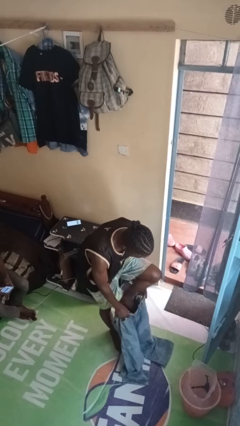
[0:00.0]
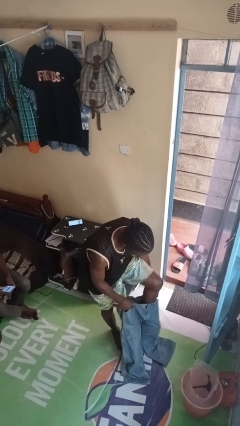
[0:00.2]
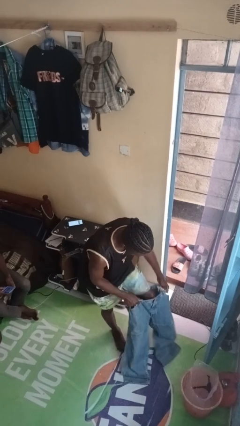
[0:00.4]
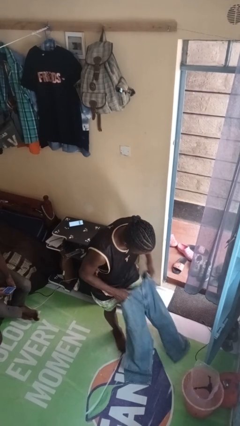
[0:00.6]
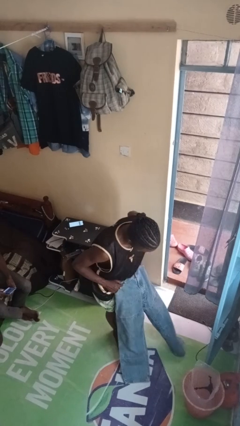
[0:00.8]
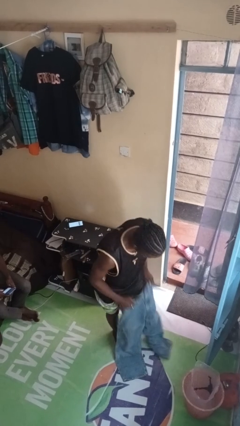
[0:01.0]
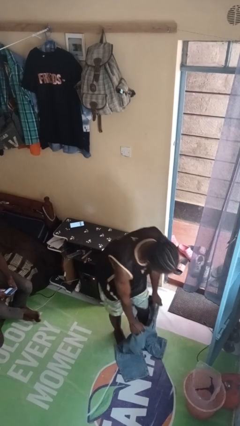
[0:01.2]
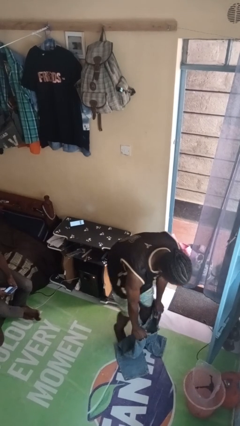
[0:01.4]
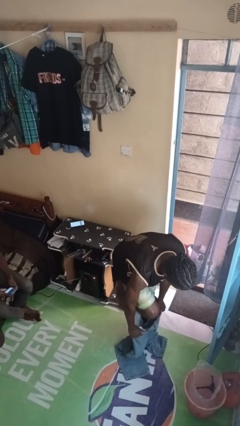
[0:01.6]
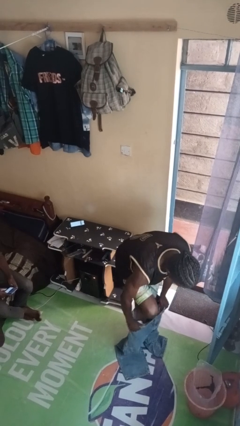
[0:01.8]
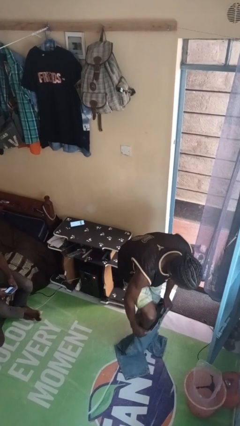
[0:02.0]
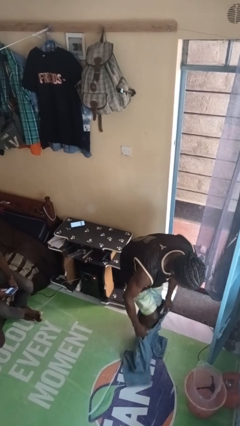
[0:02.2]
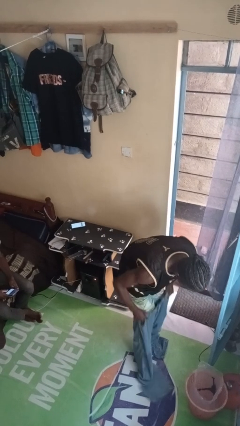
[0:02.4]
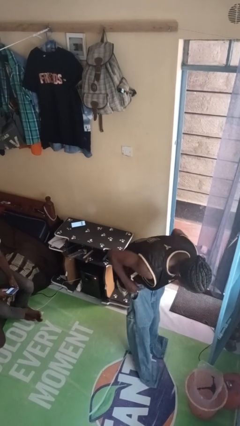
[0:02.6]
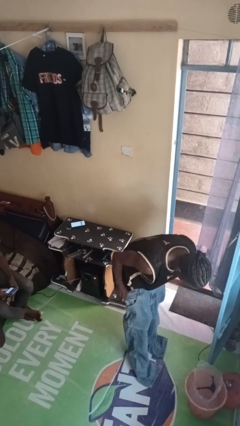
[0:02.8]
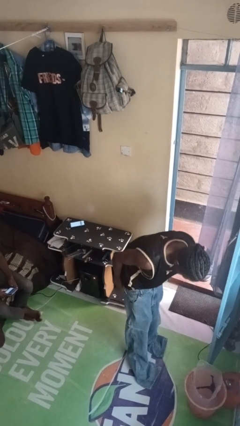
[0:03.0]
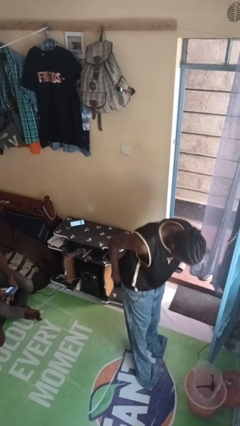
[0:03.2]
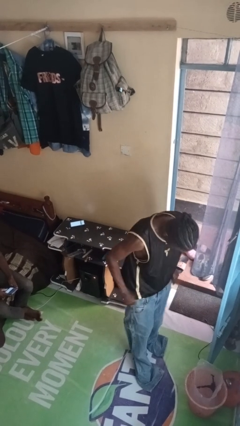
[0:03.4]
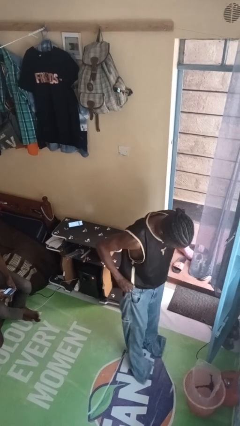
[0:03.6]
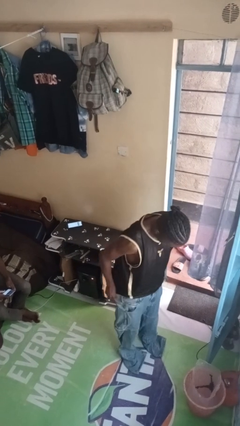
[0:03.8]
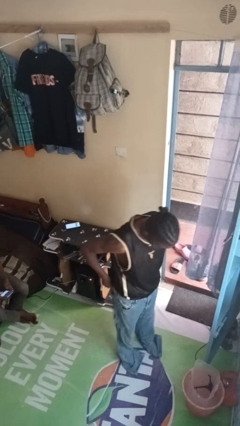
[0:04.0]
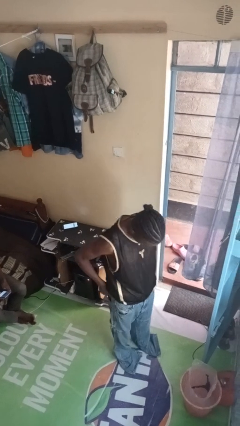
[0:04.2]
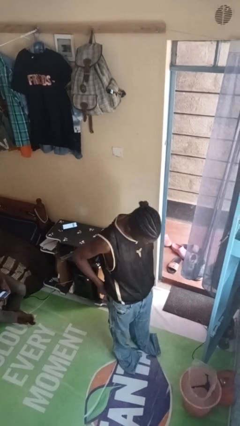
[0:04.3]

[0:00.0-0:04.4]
person puts on pants

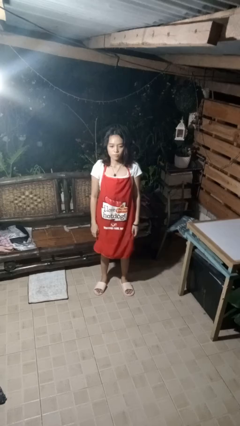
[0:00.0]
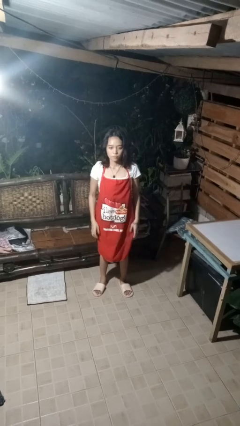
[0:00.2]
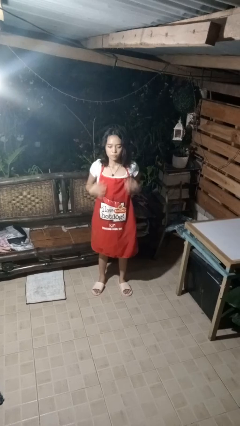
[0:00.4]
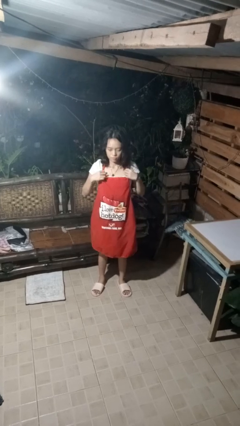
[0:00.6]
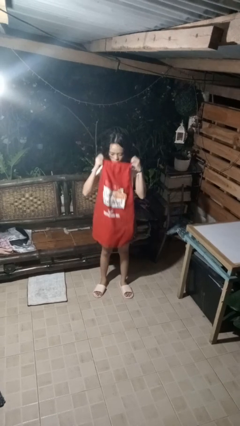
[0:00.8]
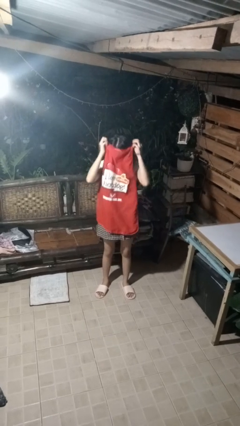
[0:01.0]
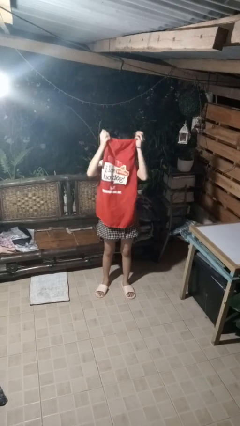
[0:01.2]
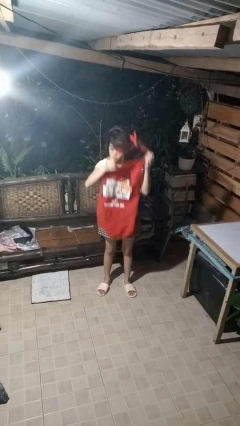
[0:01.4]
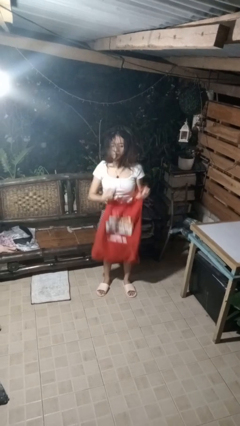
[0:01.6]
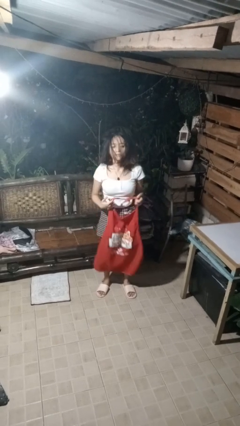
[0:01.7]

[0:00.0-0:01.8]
person takes off apron

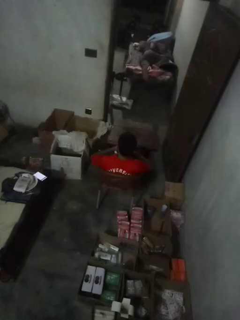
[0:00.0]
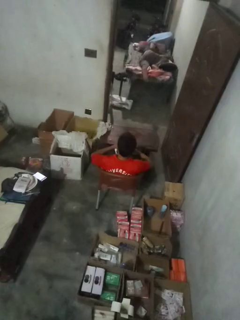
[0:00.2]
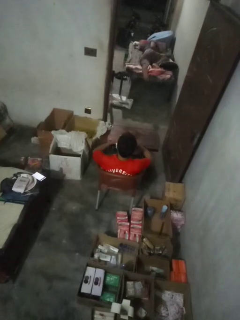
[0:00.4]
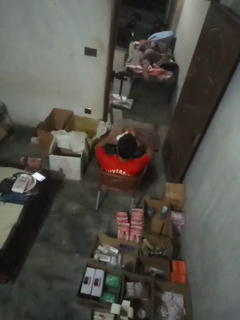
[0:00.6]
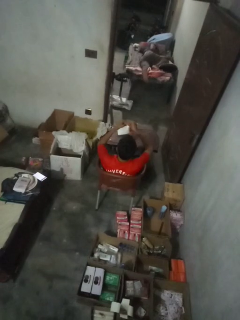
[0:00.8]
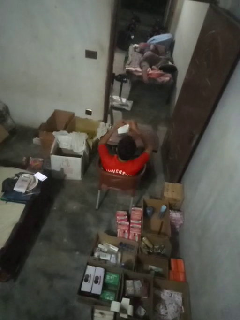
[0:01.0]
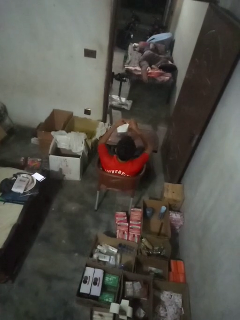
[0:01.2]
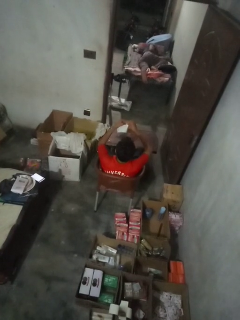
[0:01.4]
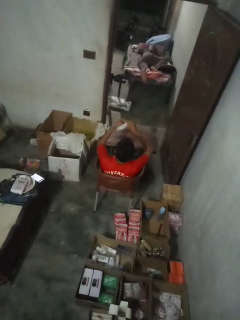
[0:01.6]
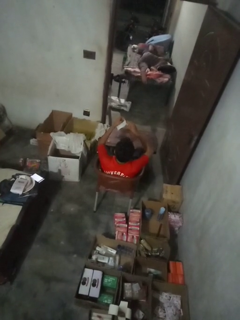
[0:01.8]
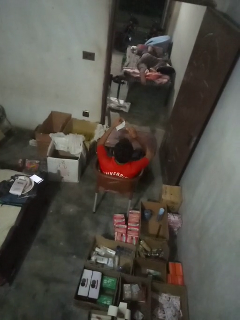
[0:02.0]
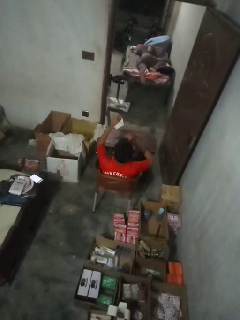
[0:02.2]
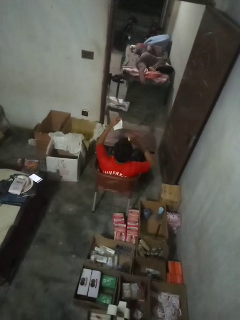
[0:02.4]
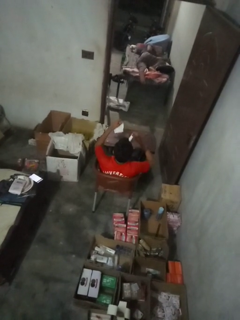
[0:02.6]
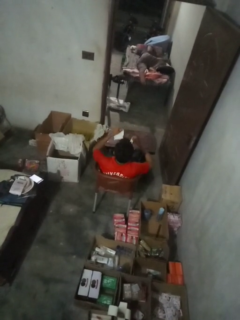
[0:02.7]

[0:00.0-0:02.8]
person tears paper

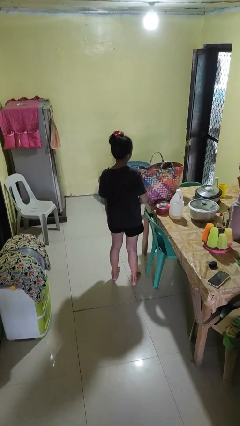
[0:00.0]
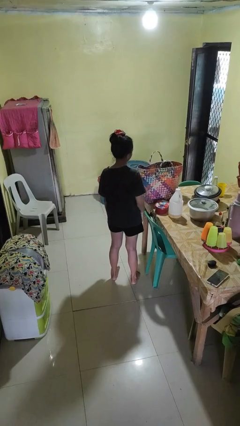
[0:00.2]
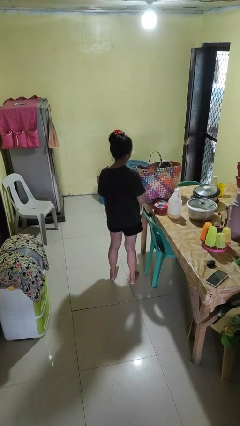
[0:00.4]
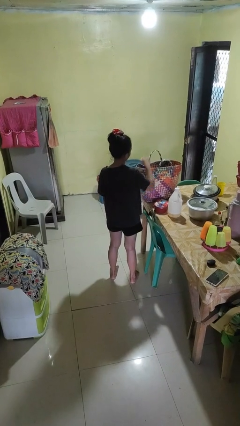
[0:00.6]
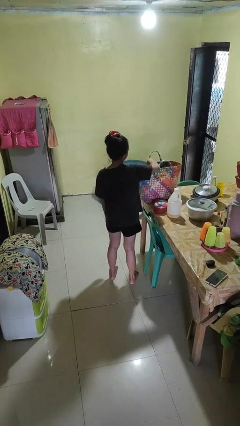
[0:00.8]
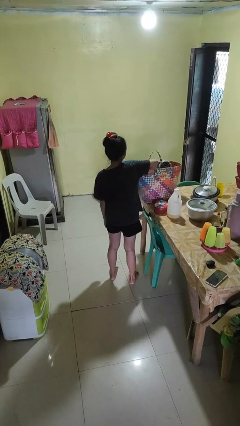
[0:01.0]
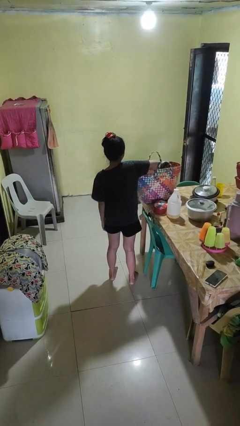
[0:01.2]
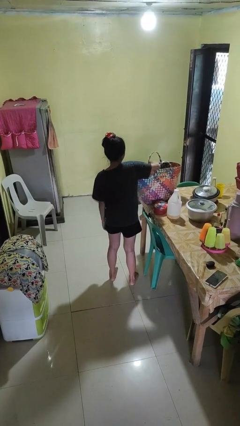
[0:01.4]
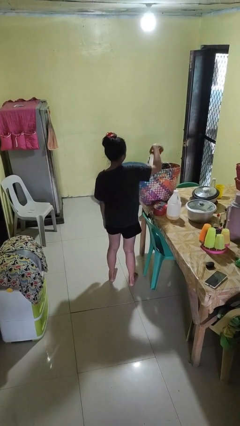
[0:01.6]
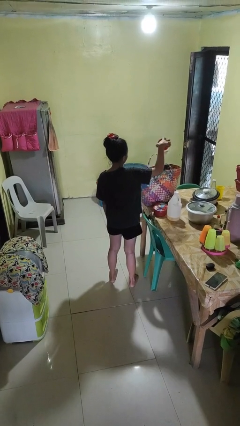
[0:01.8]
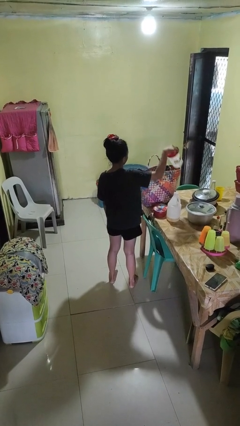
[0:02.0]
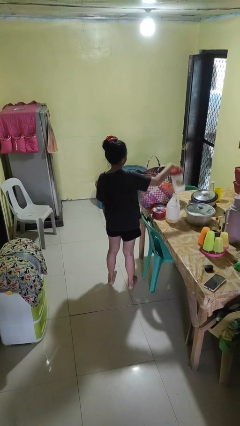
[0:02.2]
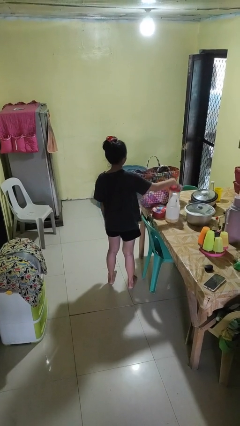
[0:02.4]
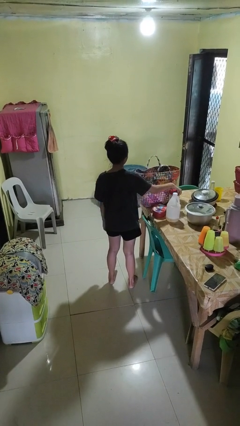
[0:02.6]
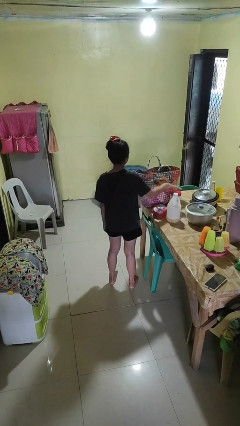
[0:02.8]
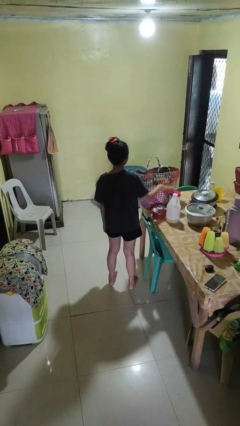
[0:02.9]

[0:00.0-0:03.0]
person takes object from basket

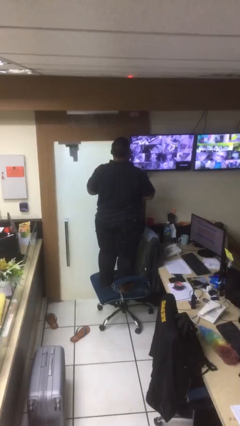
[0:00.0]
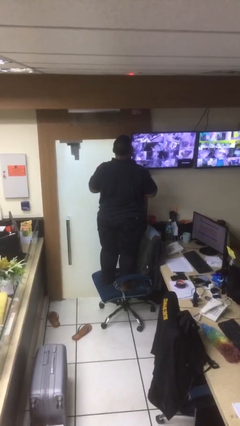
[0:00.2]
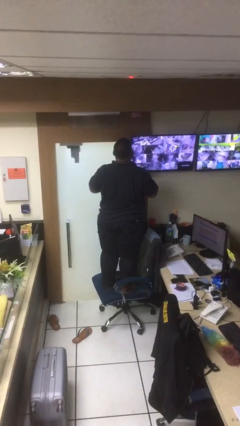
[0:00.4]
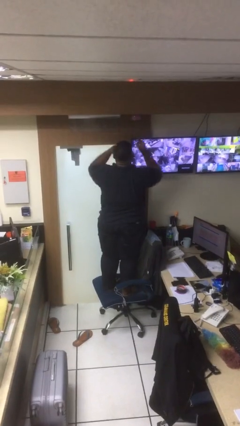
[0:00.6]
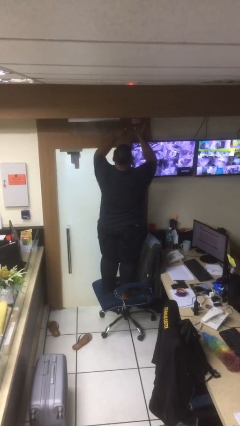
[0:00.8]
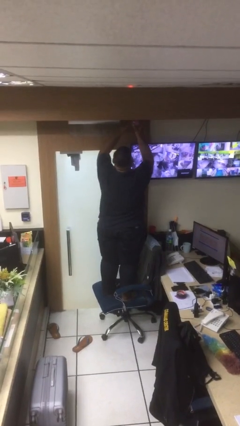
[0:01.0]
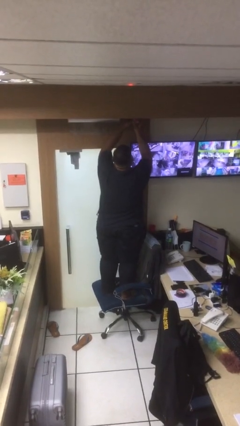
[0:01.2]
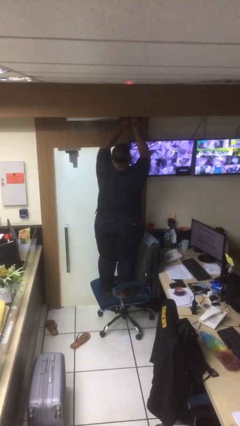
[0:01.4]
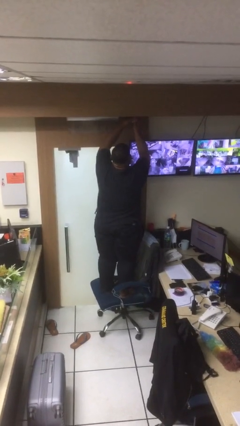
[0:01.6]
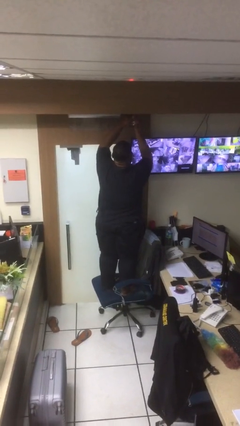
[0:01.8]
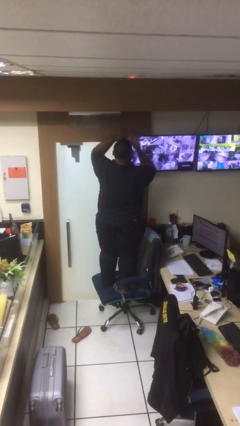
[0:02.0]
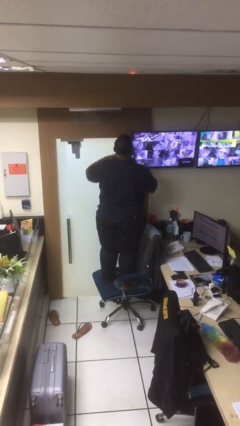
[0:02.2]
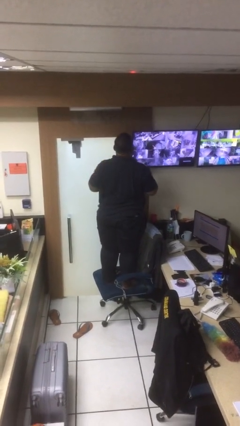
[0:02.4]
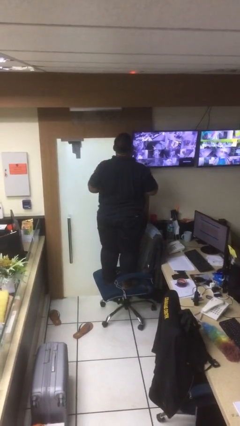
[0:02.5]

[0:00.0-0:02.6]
person takes down smoke detector

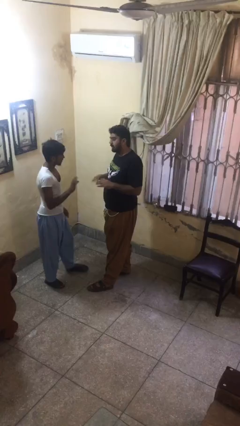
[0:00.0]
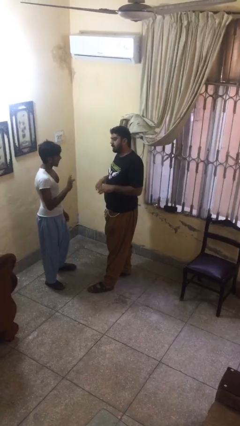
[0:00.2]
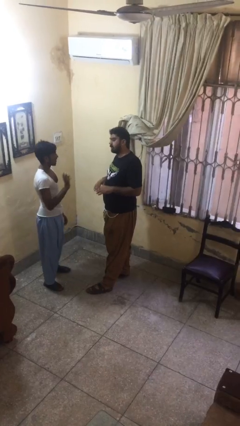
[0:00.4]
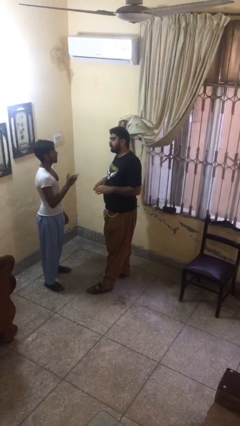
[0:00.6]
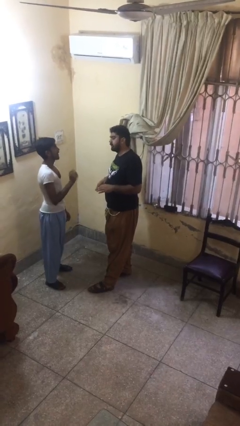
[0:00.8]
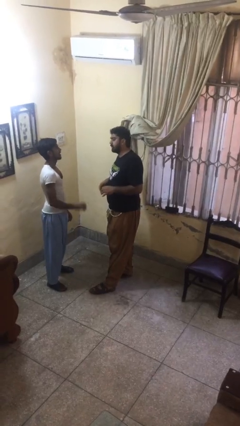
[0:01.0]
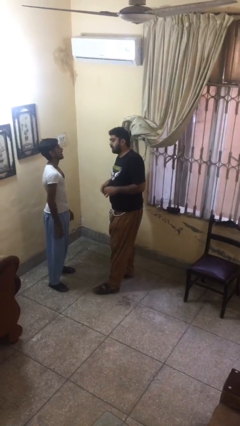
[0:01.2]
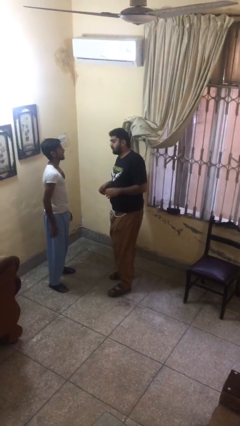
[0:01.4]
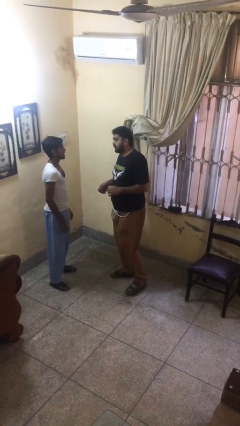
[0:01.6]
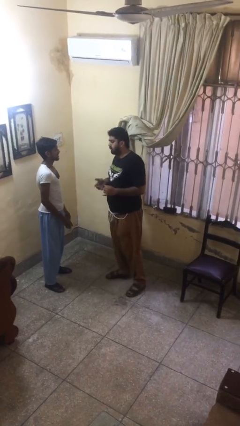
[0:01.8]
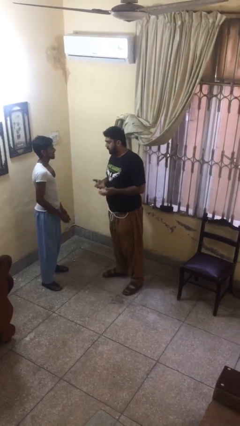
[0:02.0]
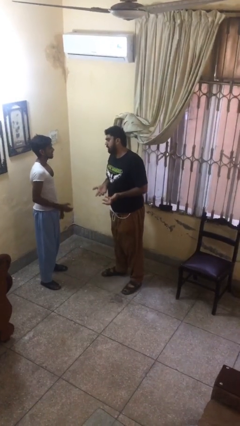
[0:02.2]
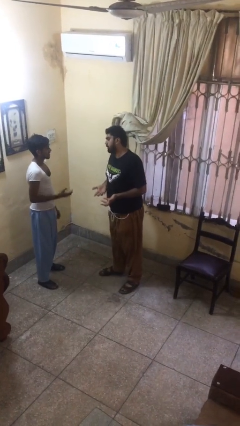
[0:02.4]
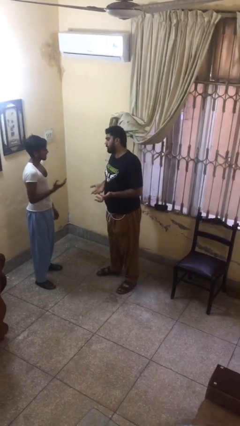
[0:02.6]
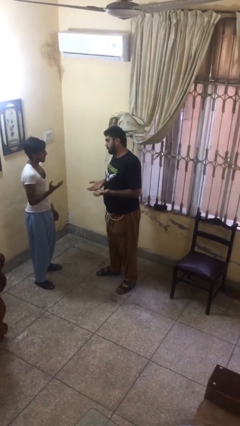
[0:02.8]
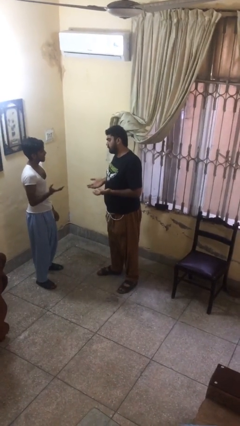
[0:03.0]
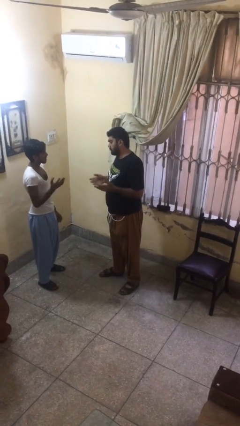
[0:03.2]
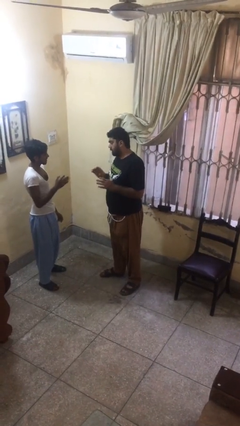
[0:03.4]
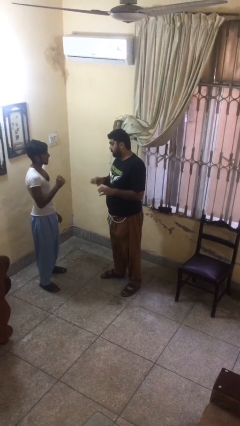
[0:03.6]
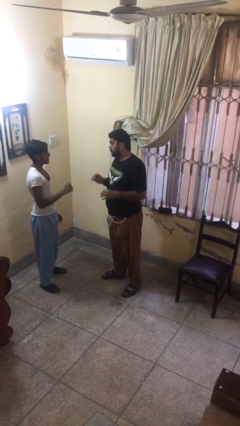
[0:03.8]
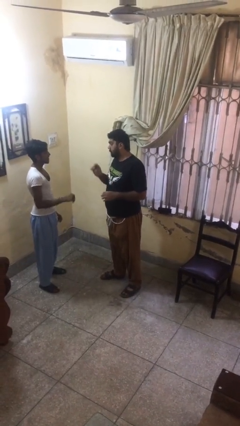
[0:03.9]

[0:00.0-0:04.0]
person talks to person
